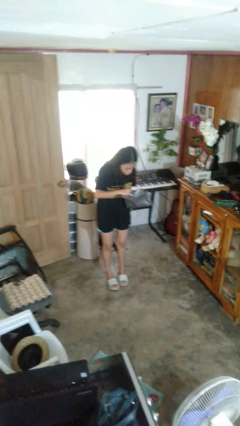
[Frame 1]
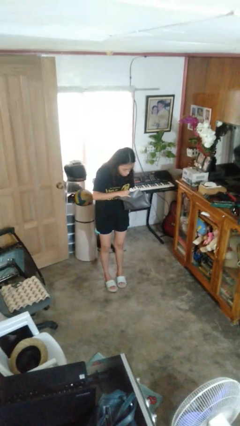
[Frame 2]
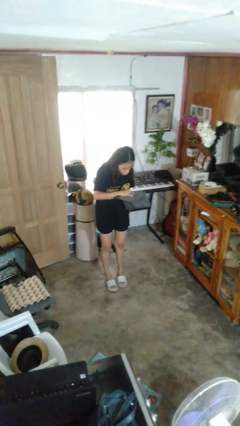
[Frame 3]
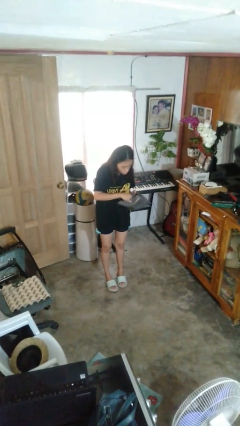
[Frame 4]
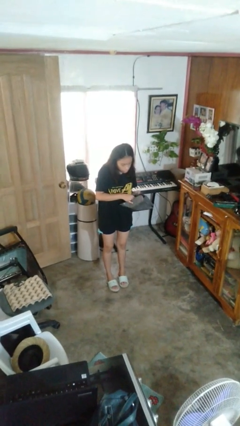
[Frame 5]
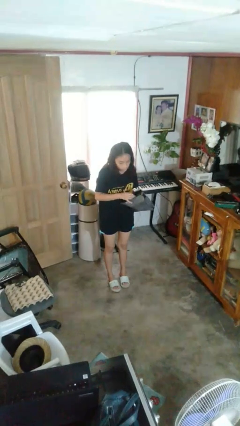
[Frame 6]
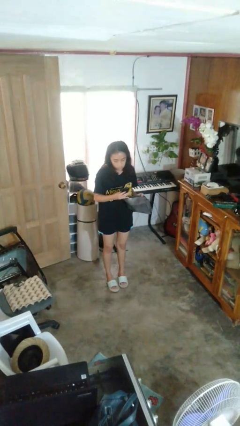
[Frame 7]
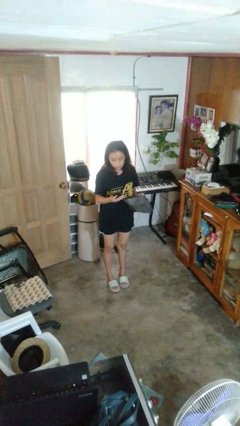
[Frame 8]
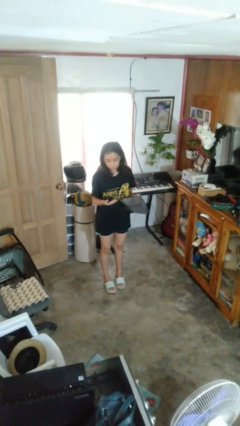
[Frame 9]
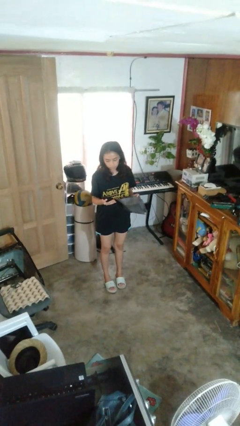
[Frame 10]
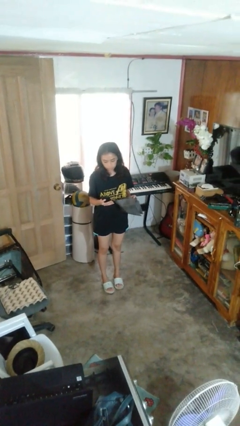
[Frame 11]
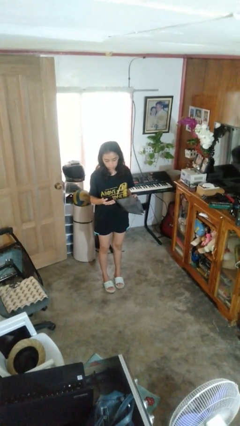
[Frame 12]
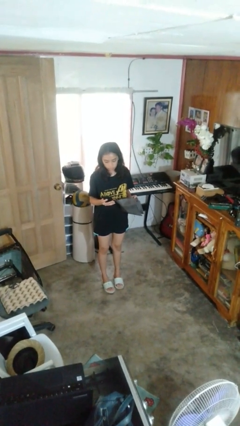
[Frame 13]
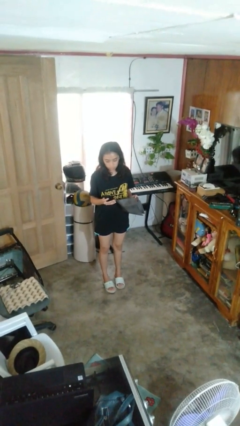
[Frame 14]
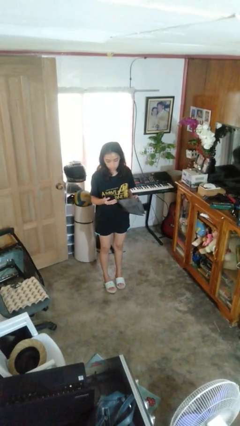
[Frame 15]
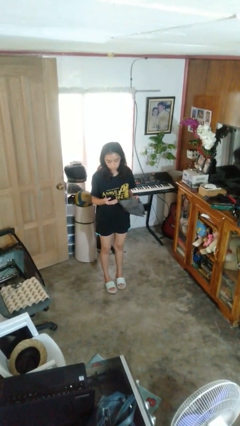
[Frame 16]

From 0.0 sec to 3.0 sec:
person takes object from purse

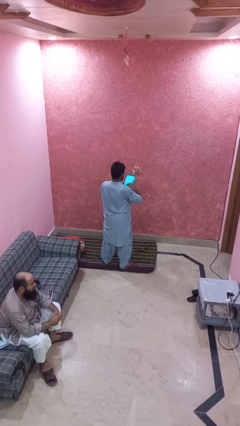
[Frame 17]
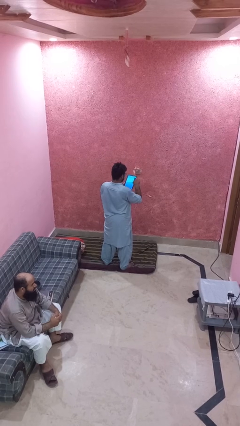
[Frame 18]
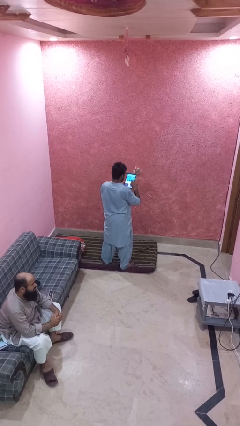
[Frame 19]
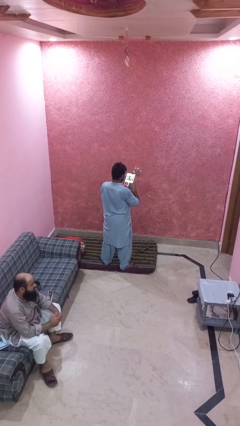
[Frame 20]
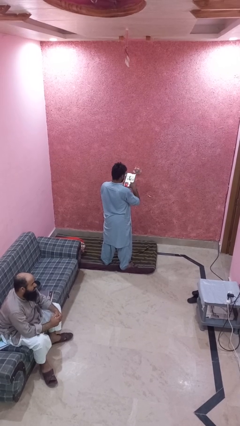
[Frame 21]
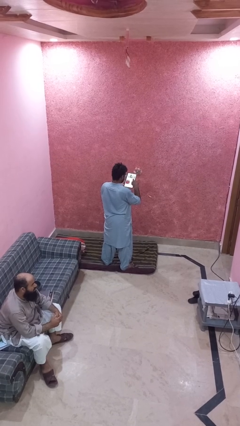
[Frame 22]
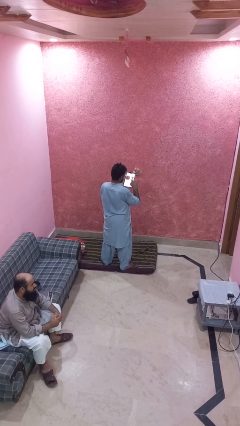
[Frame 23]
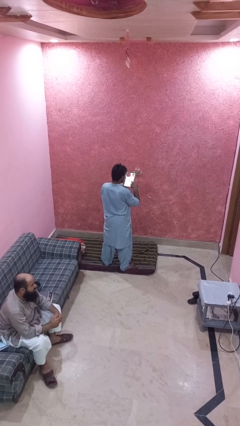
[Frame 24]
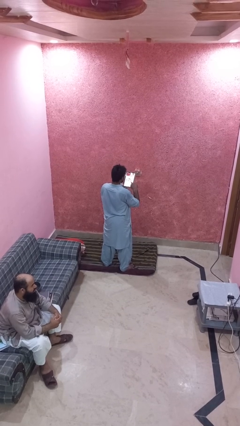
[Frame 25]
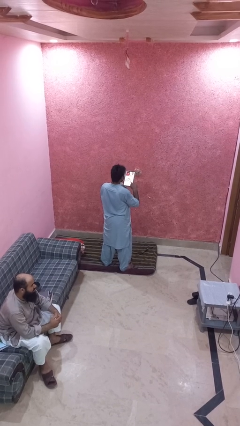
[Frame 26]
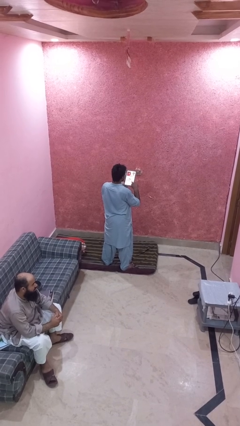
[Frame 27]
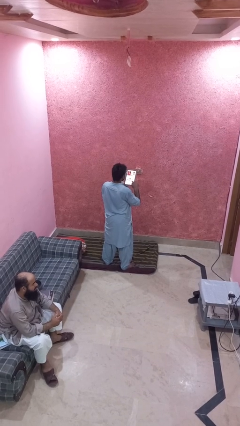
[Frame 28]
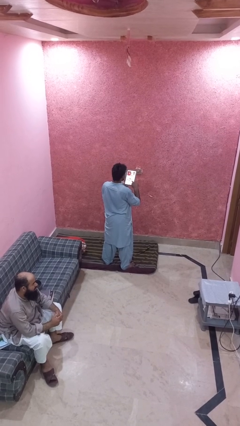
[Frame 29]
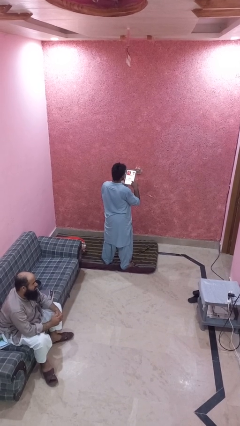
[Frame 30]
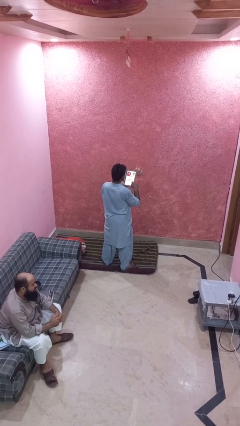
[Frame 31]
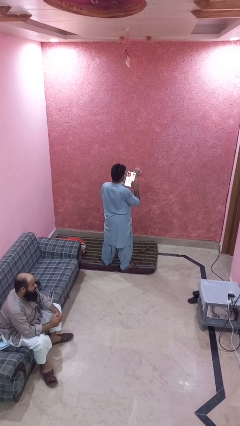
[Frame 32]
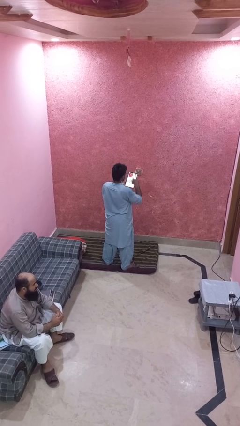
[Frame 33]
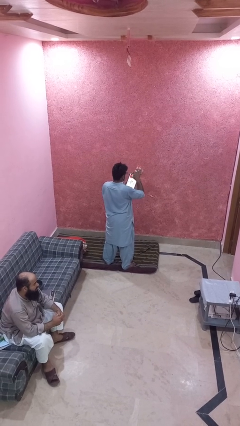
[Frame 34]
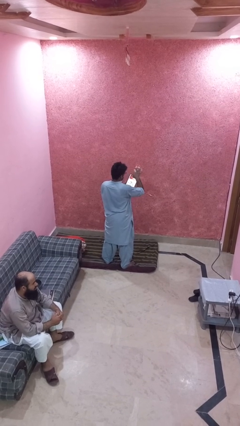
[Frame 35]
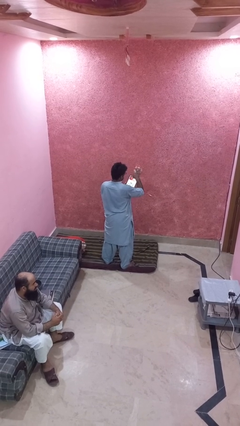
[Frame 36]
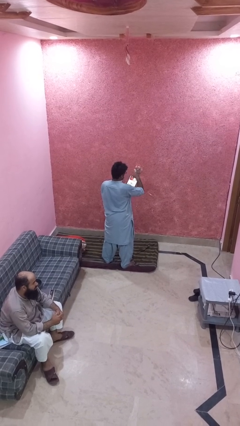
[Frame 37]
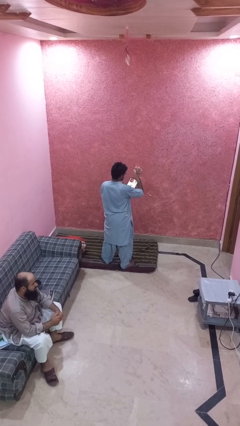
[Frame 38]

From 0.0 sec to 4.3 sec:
person interacts with tablet

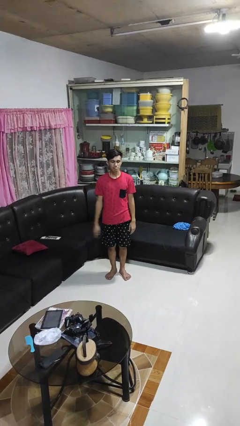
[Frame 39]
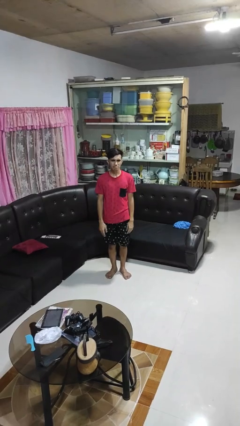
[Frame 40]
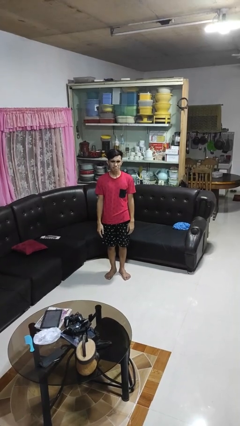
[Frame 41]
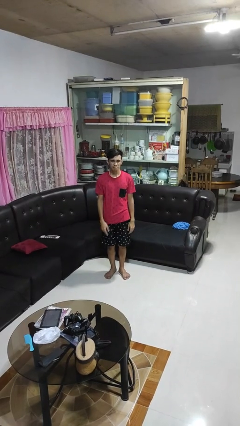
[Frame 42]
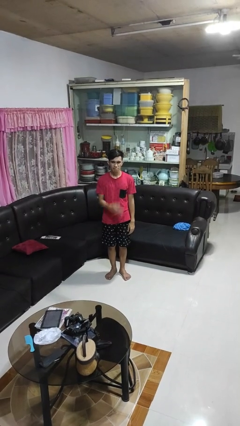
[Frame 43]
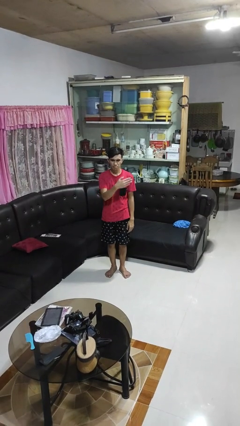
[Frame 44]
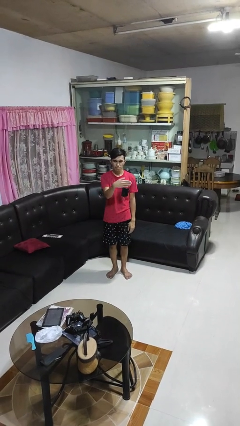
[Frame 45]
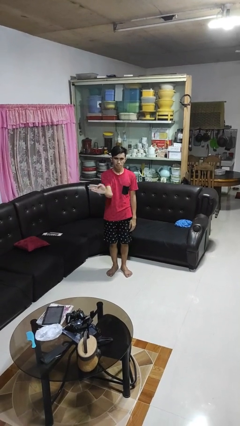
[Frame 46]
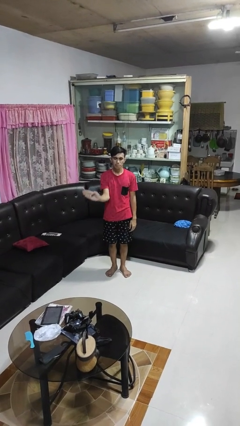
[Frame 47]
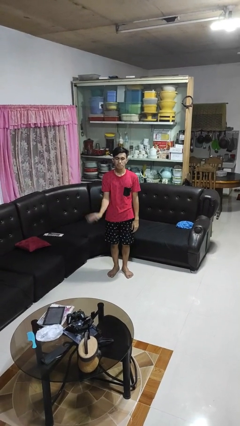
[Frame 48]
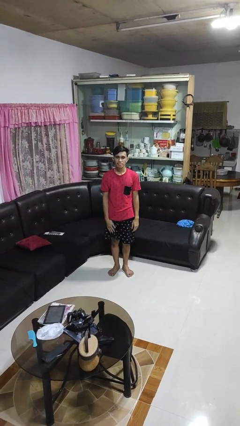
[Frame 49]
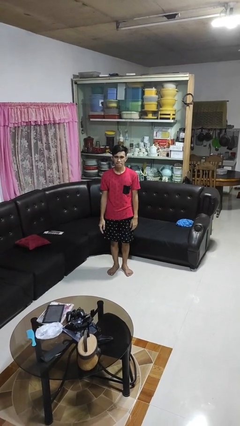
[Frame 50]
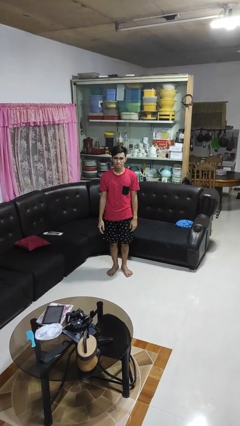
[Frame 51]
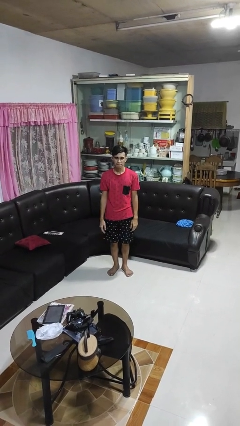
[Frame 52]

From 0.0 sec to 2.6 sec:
person gestures swipe right

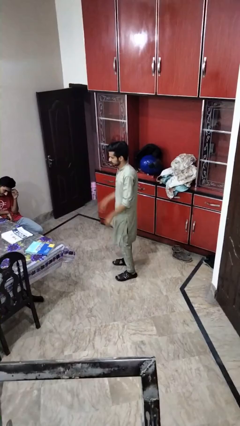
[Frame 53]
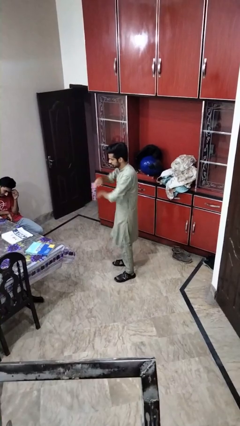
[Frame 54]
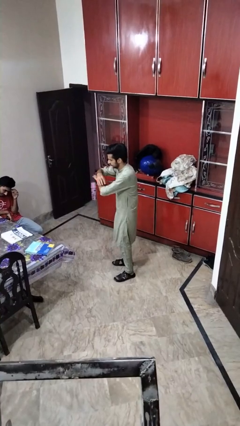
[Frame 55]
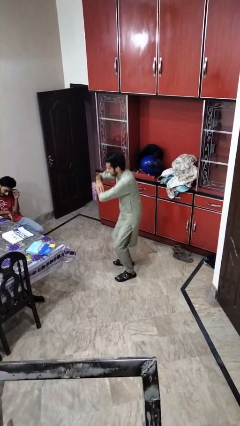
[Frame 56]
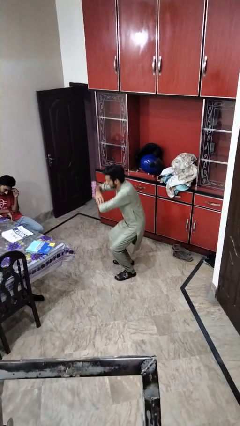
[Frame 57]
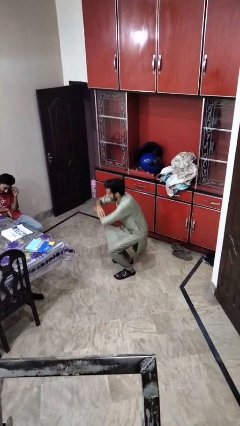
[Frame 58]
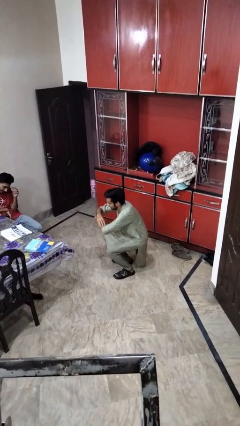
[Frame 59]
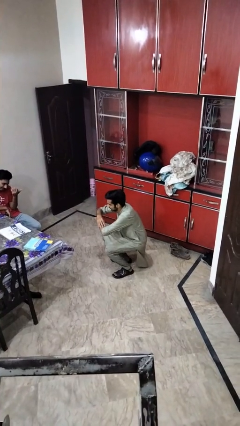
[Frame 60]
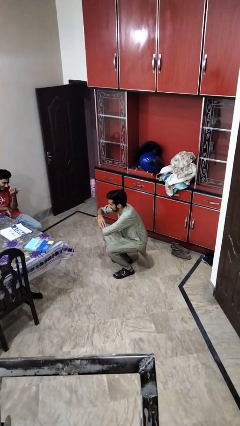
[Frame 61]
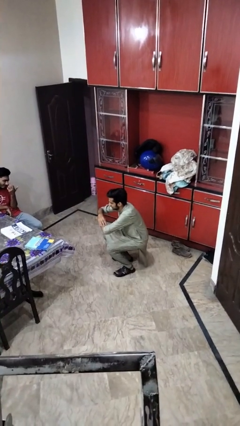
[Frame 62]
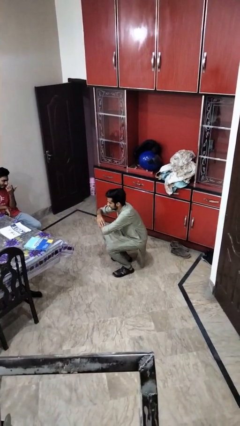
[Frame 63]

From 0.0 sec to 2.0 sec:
person squats

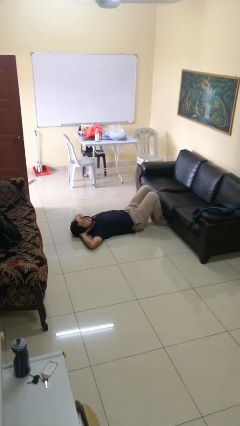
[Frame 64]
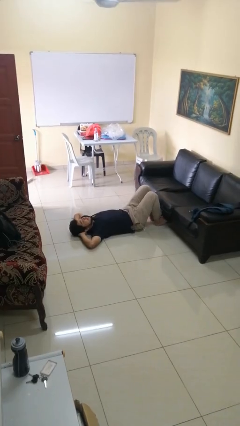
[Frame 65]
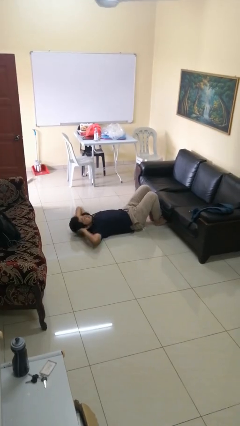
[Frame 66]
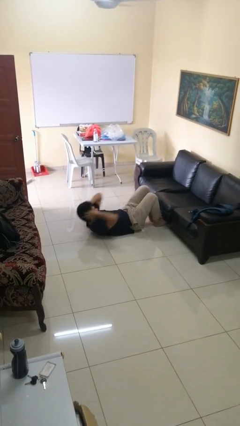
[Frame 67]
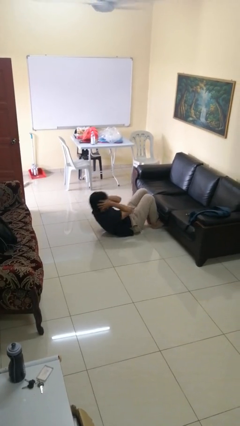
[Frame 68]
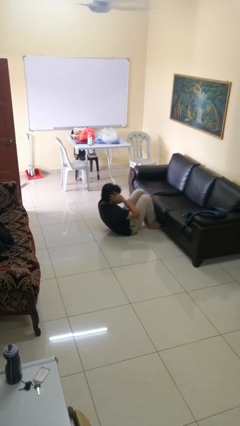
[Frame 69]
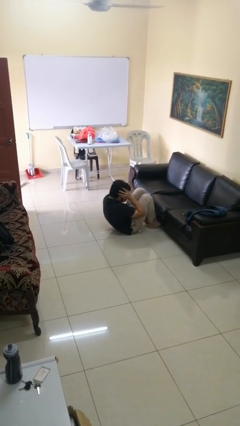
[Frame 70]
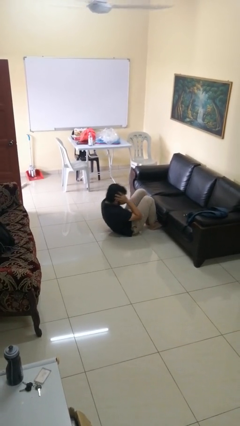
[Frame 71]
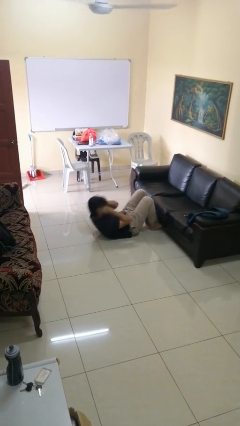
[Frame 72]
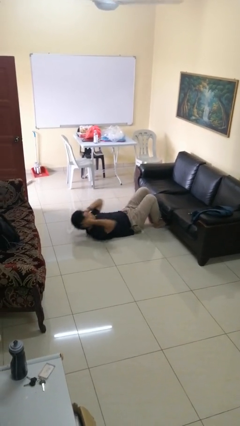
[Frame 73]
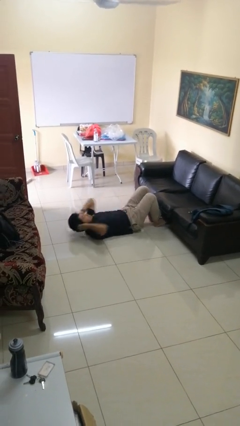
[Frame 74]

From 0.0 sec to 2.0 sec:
person exercises with situp

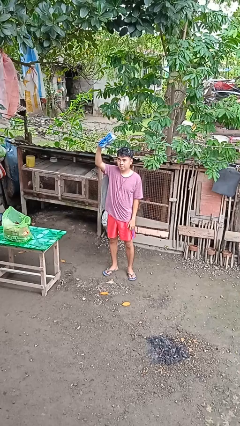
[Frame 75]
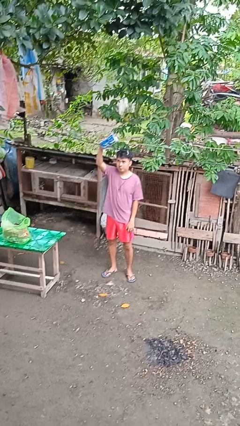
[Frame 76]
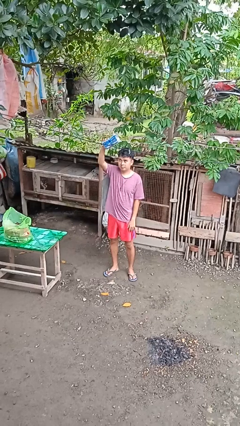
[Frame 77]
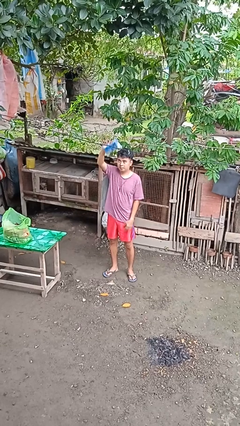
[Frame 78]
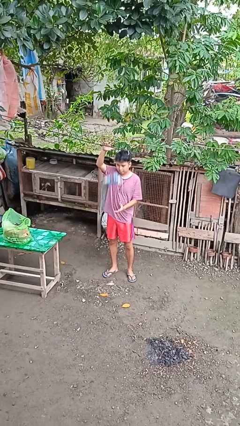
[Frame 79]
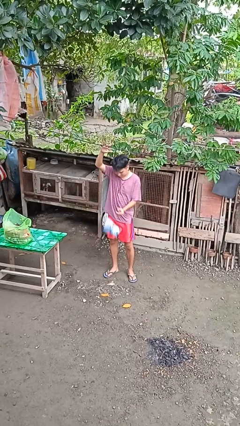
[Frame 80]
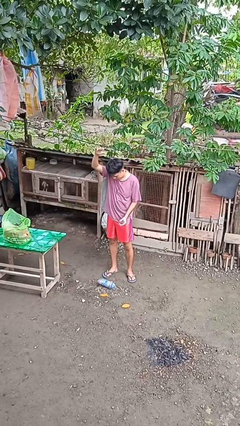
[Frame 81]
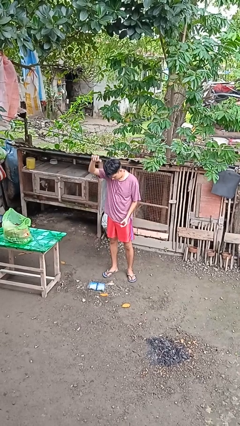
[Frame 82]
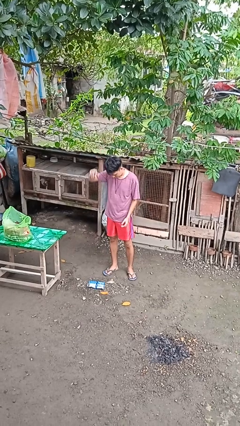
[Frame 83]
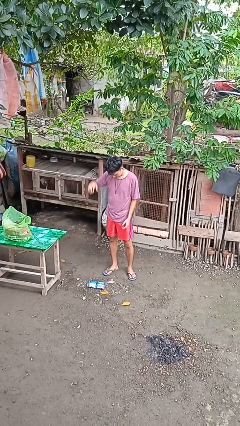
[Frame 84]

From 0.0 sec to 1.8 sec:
person drops object

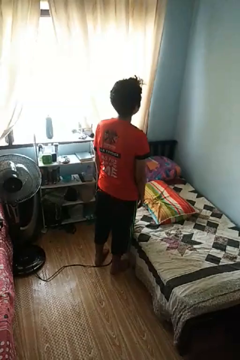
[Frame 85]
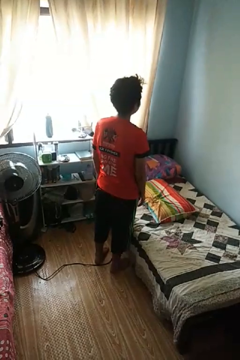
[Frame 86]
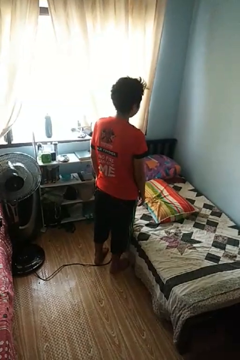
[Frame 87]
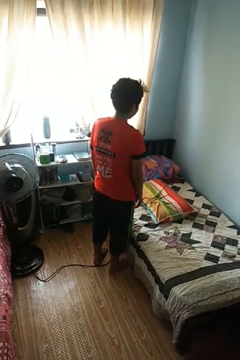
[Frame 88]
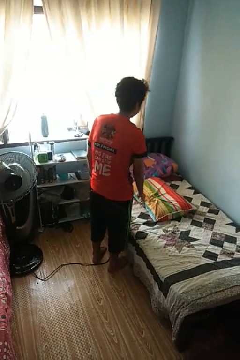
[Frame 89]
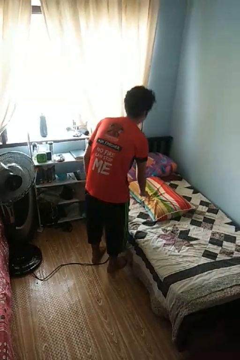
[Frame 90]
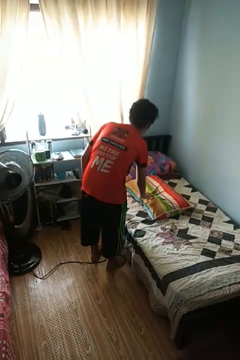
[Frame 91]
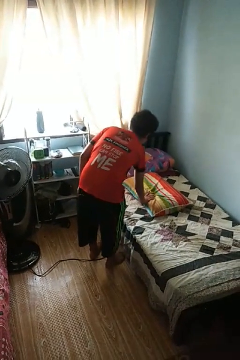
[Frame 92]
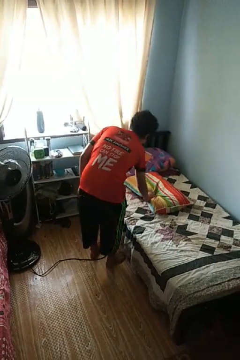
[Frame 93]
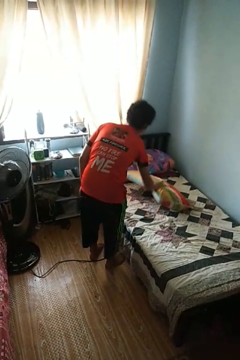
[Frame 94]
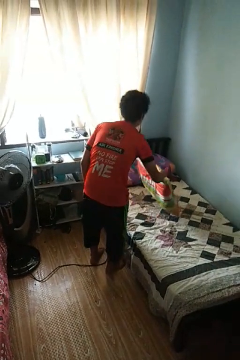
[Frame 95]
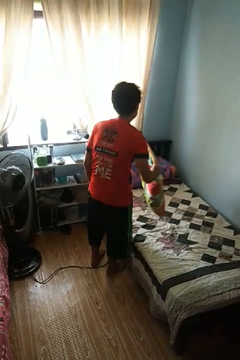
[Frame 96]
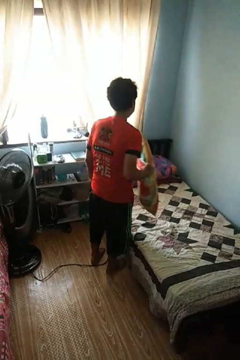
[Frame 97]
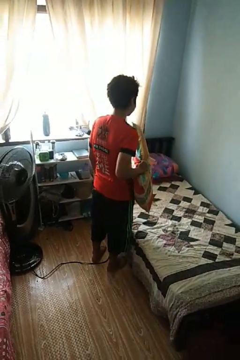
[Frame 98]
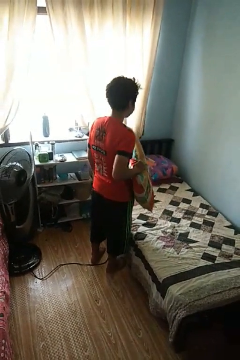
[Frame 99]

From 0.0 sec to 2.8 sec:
person picks up object from bed
